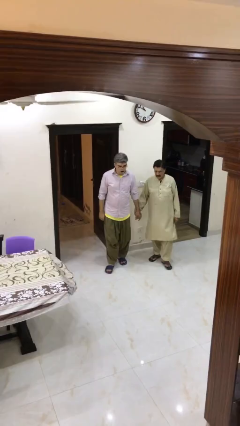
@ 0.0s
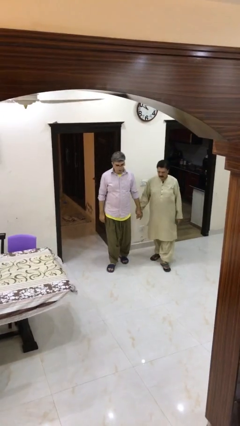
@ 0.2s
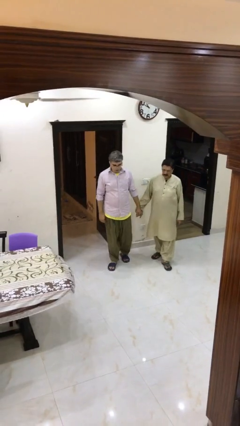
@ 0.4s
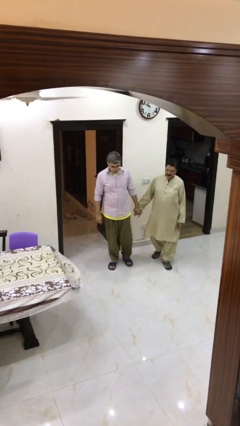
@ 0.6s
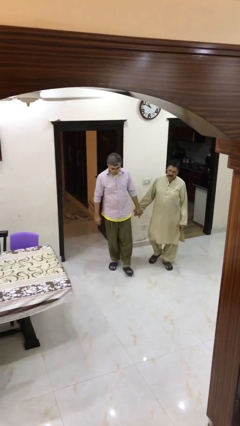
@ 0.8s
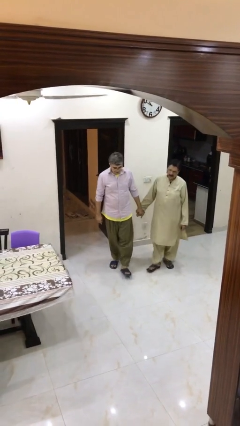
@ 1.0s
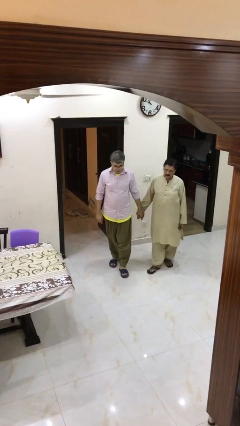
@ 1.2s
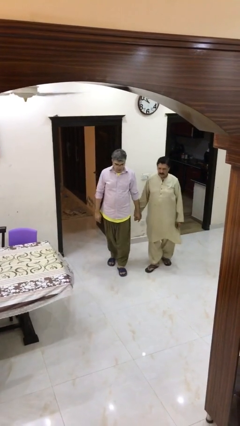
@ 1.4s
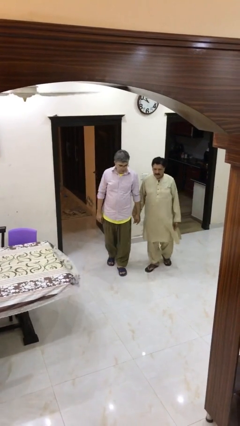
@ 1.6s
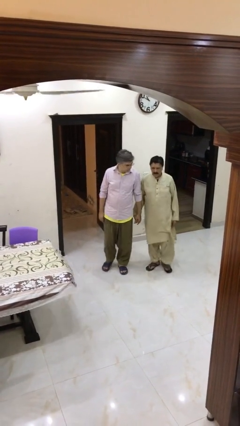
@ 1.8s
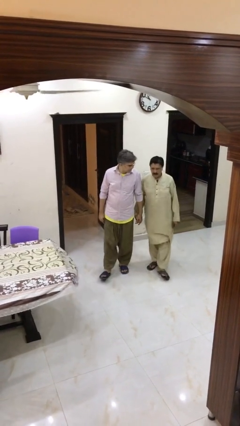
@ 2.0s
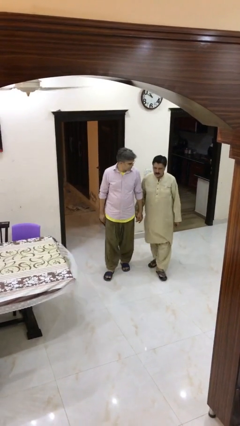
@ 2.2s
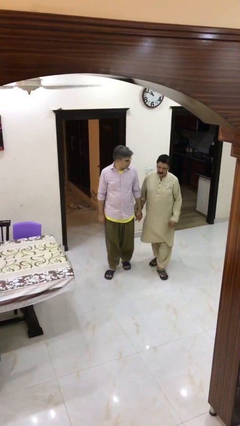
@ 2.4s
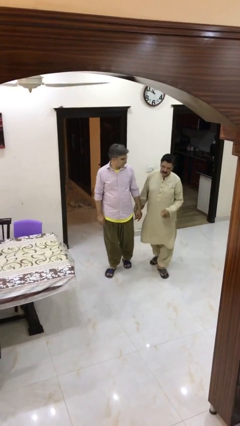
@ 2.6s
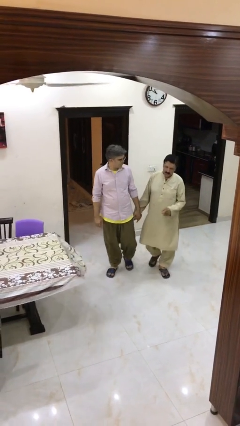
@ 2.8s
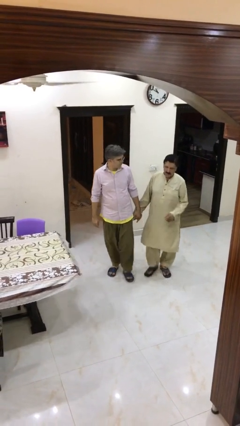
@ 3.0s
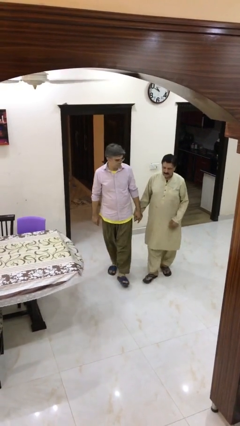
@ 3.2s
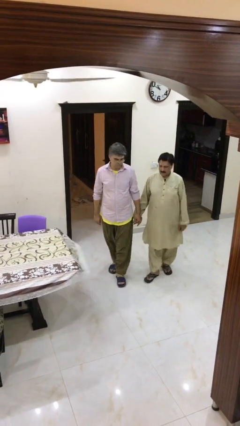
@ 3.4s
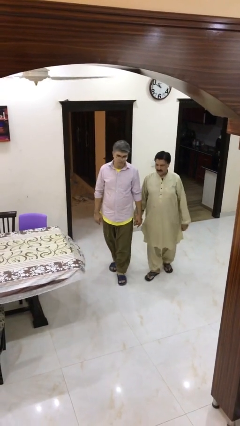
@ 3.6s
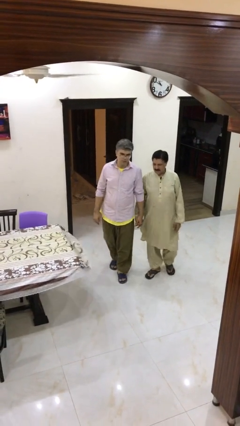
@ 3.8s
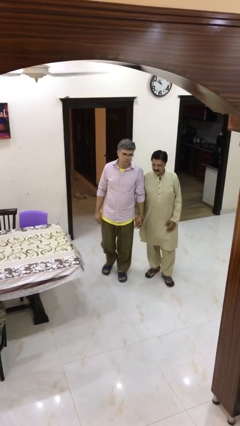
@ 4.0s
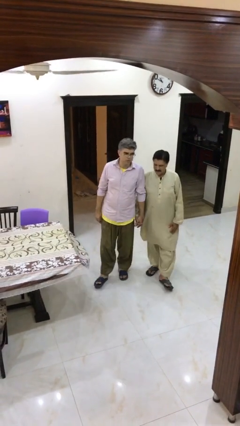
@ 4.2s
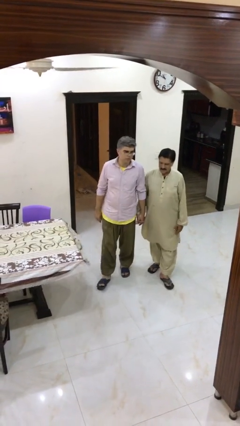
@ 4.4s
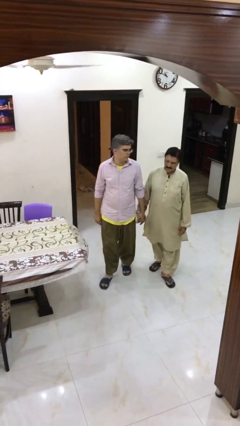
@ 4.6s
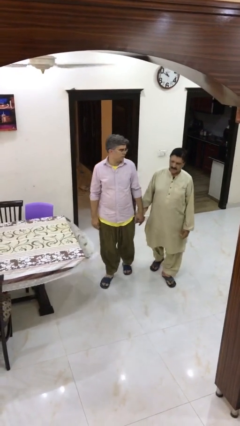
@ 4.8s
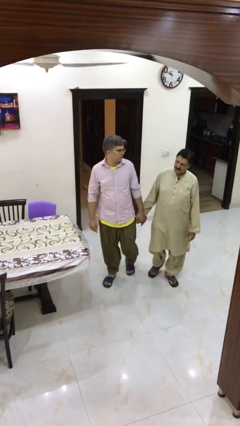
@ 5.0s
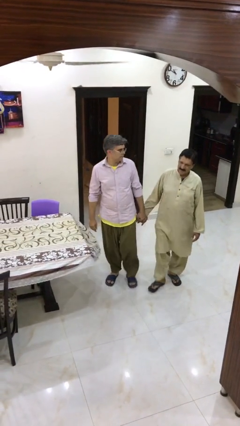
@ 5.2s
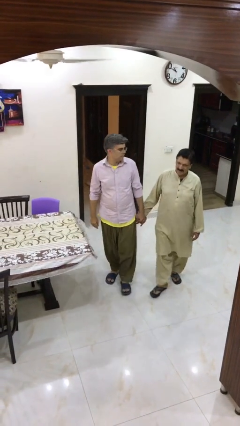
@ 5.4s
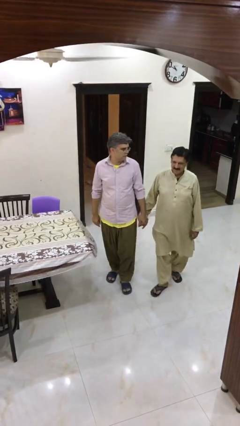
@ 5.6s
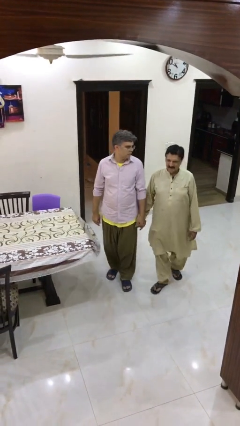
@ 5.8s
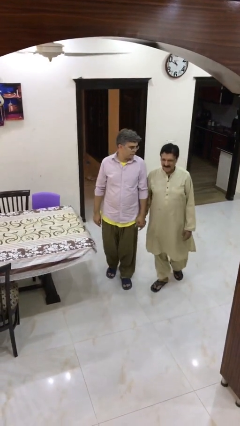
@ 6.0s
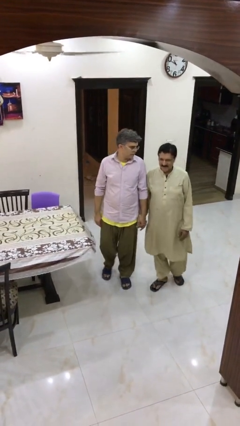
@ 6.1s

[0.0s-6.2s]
person holds hand

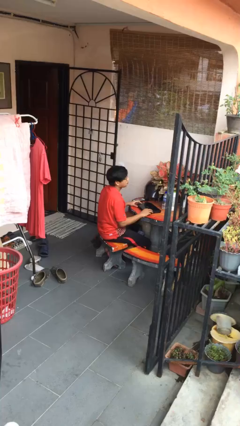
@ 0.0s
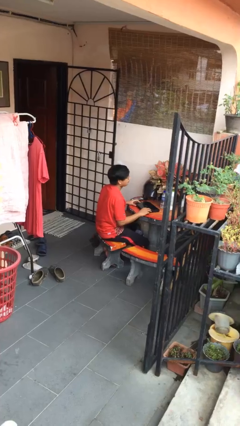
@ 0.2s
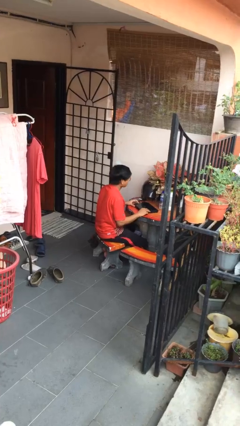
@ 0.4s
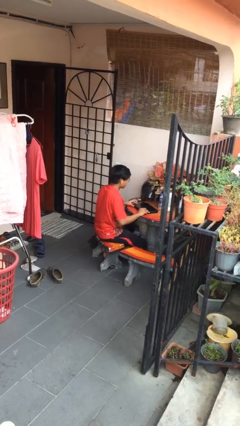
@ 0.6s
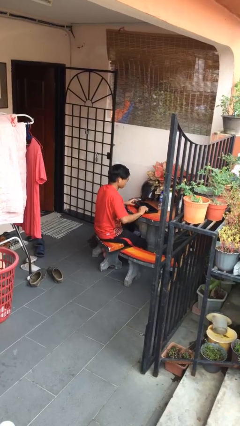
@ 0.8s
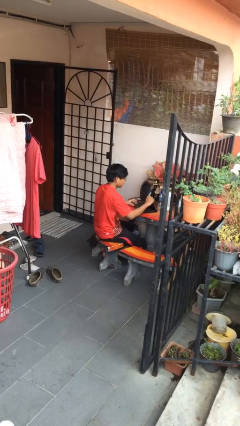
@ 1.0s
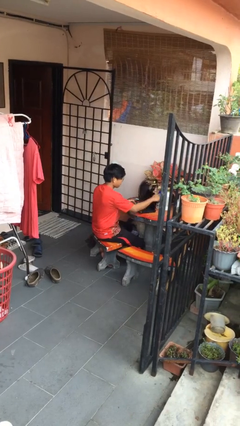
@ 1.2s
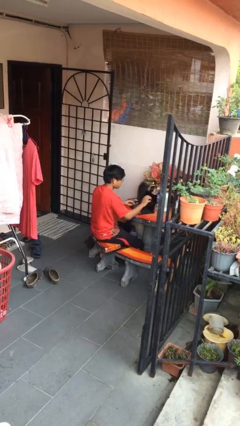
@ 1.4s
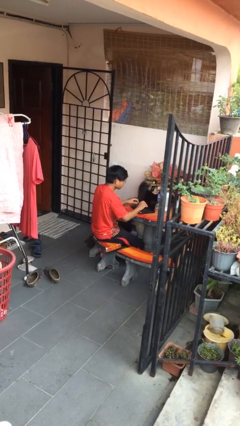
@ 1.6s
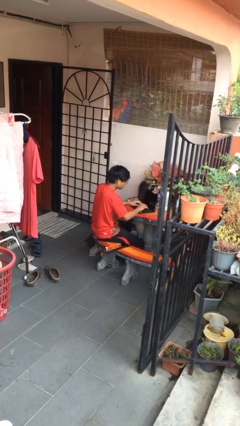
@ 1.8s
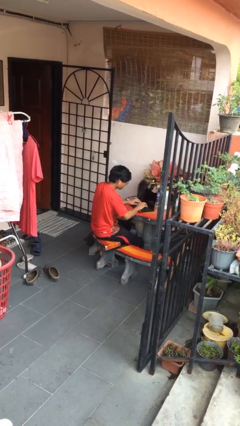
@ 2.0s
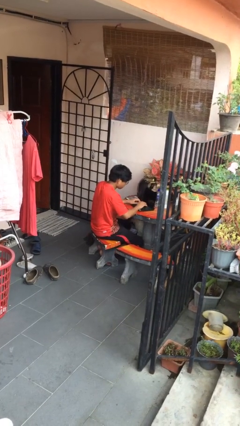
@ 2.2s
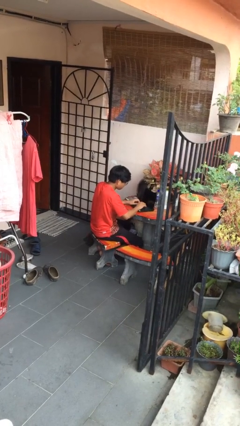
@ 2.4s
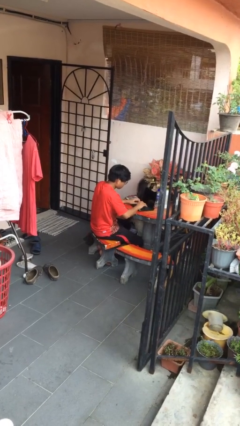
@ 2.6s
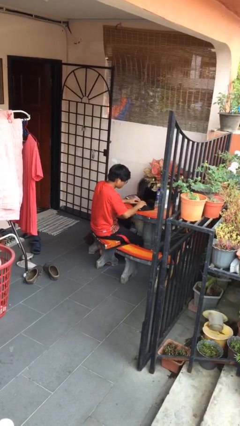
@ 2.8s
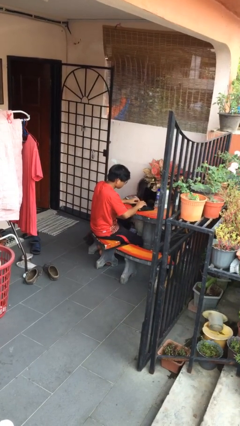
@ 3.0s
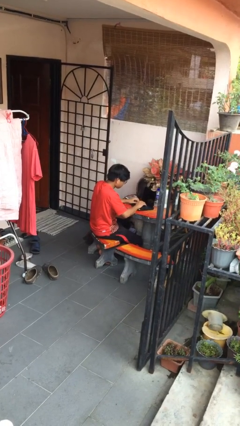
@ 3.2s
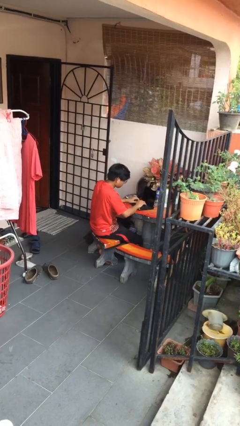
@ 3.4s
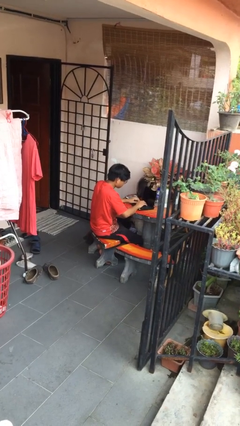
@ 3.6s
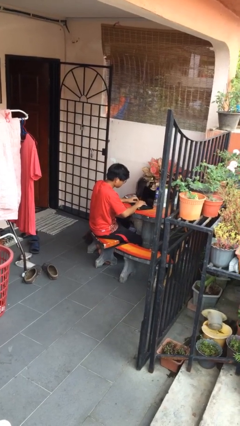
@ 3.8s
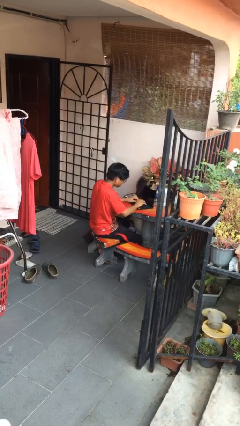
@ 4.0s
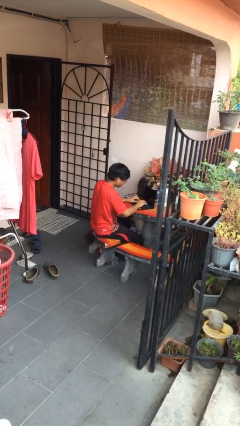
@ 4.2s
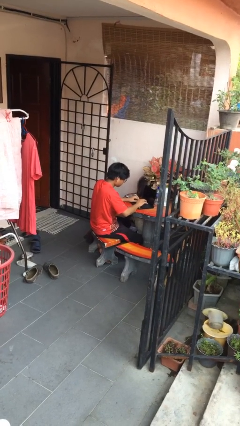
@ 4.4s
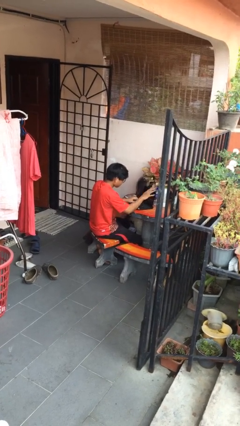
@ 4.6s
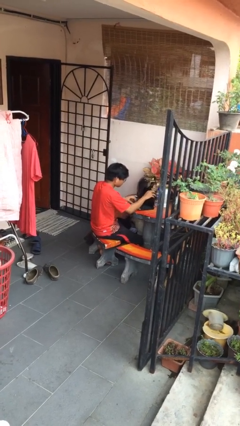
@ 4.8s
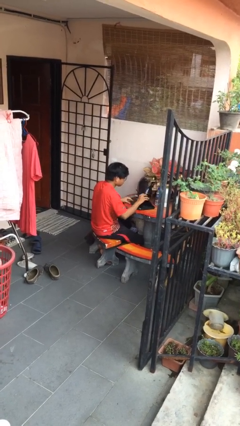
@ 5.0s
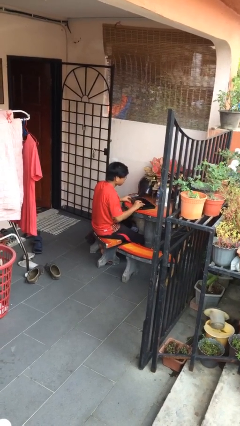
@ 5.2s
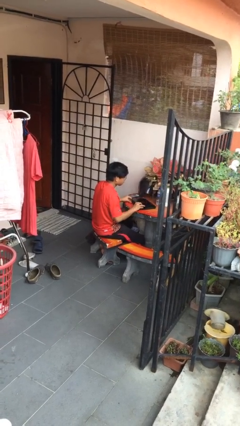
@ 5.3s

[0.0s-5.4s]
person interacts with laptop

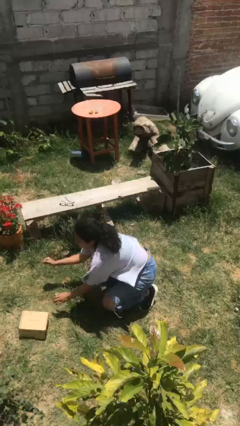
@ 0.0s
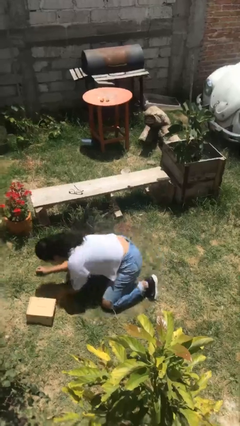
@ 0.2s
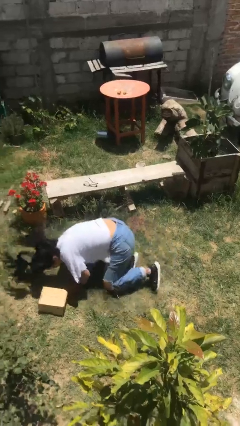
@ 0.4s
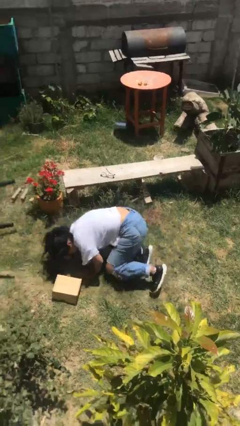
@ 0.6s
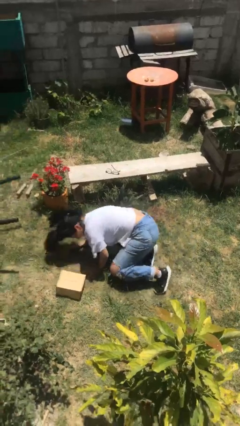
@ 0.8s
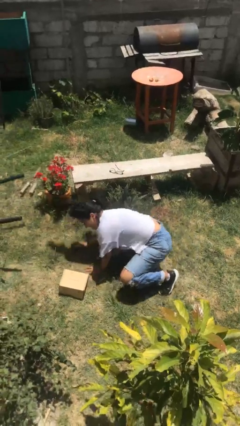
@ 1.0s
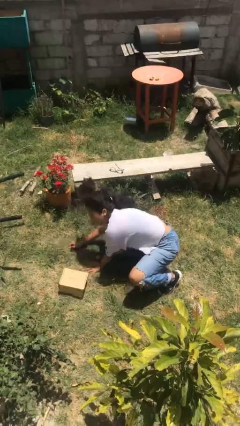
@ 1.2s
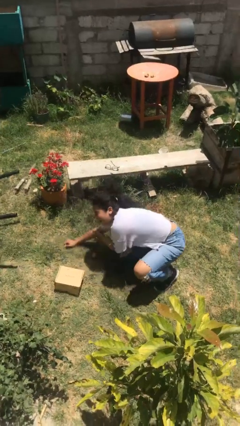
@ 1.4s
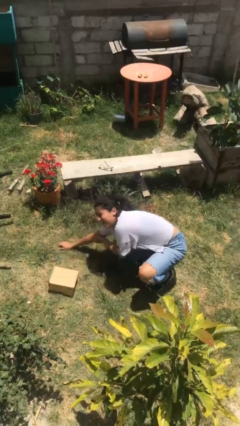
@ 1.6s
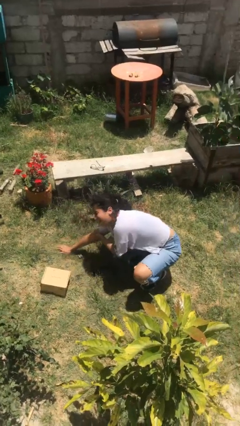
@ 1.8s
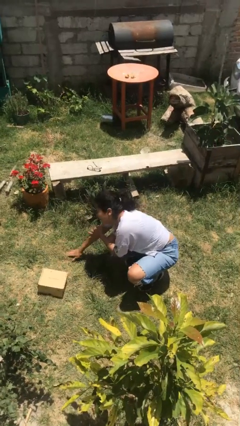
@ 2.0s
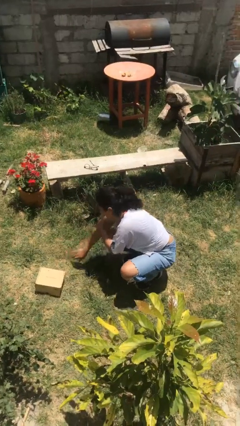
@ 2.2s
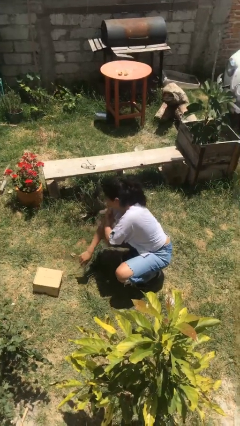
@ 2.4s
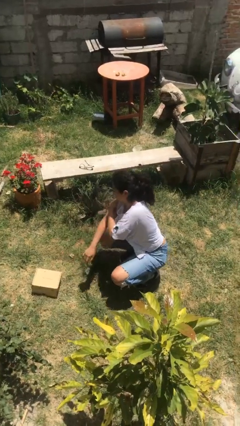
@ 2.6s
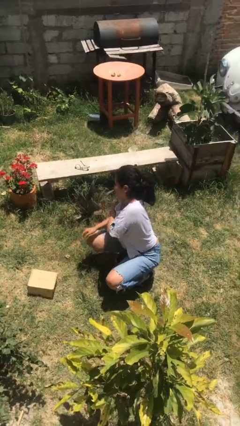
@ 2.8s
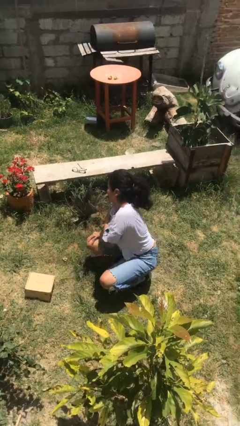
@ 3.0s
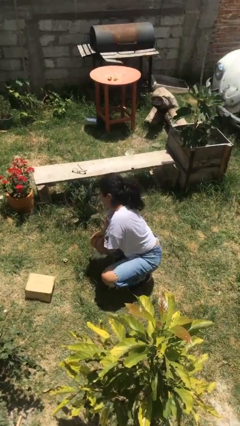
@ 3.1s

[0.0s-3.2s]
person lies down on floor

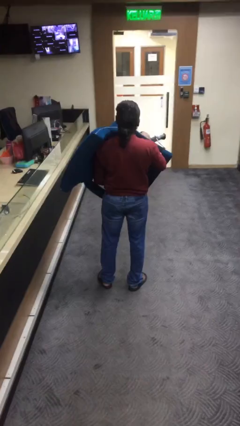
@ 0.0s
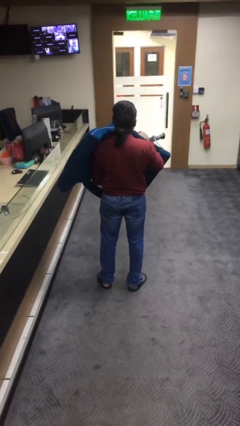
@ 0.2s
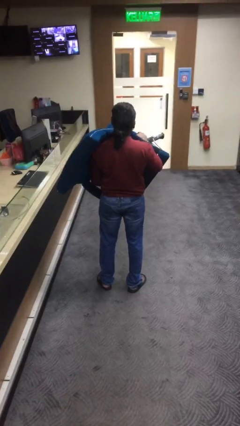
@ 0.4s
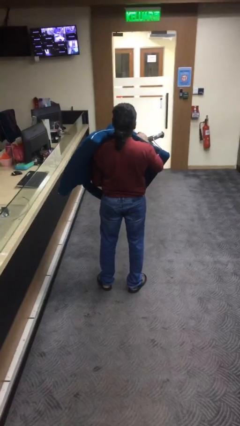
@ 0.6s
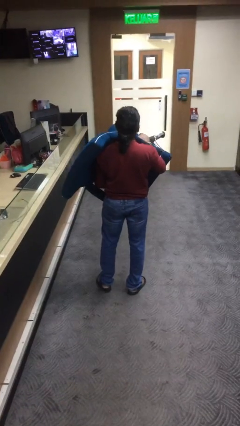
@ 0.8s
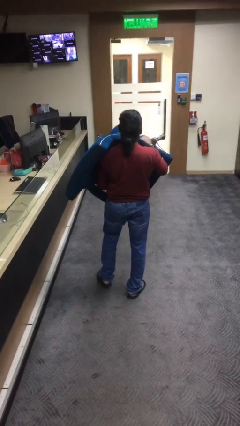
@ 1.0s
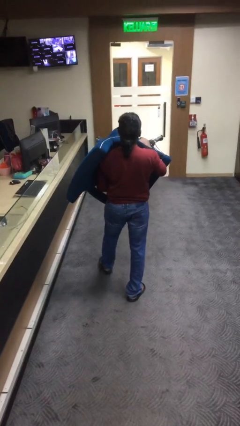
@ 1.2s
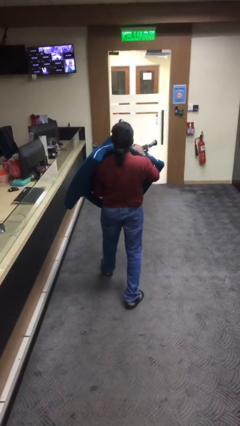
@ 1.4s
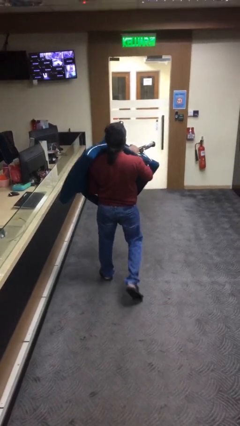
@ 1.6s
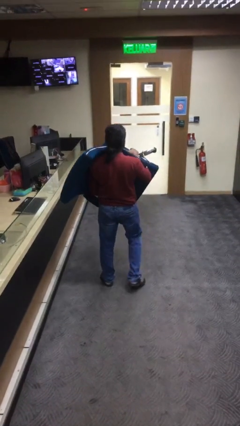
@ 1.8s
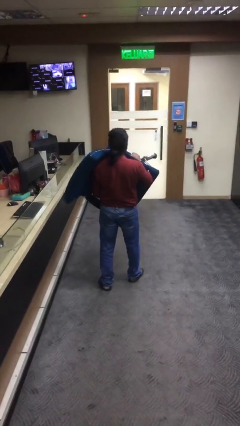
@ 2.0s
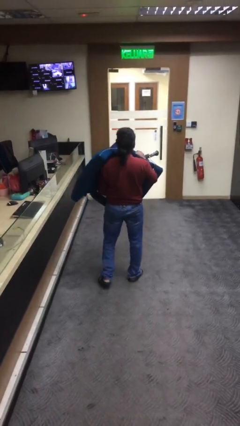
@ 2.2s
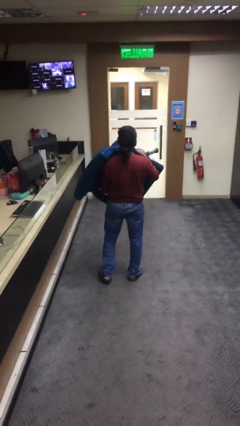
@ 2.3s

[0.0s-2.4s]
person carries furniture

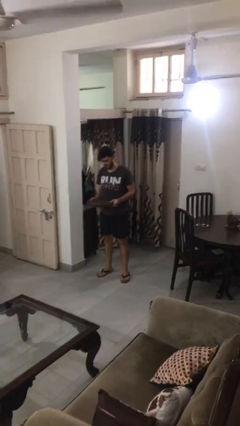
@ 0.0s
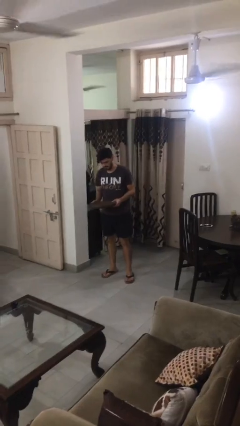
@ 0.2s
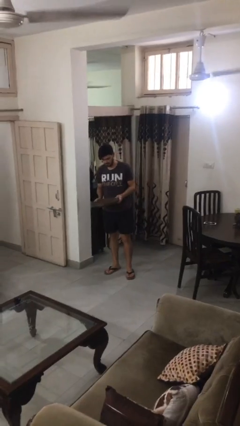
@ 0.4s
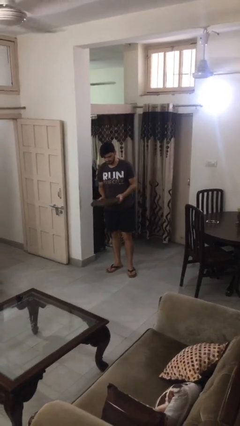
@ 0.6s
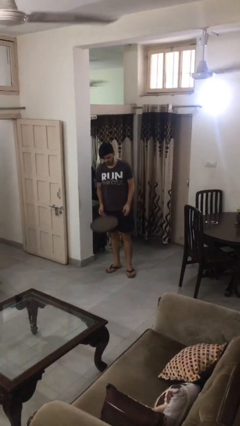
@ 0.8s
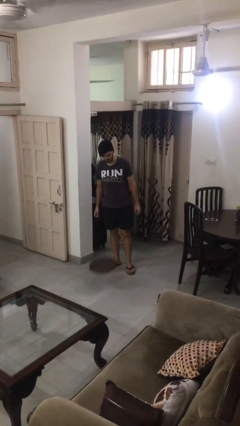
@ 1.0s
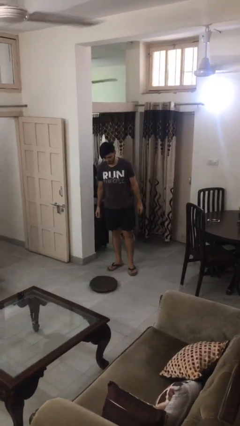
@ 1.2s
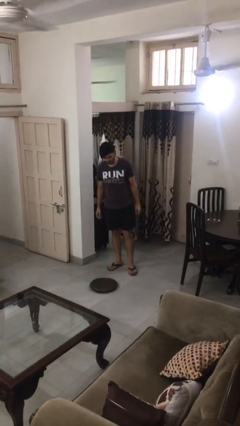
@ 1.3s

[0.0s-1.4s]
person drops object
